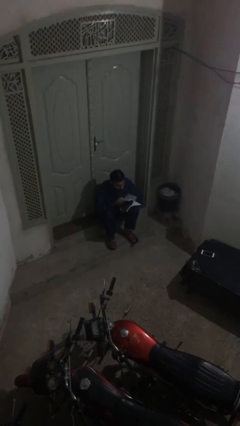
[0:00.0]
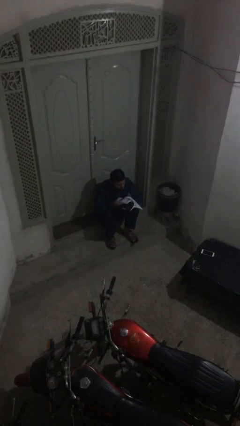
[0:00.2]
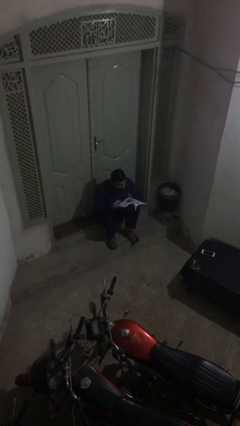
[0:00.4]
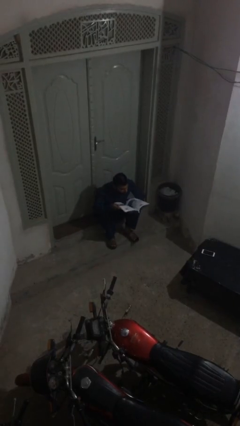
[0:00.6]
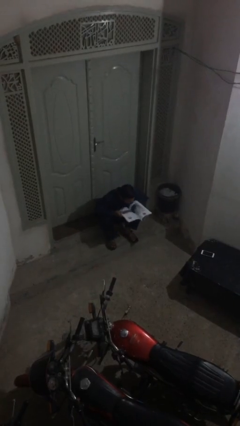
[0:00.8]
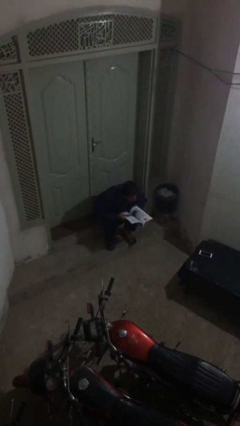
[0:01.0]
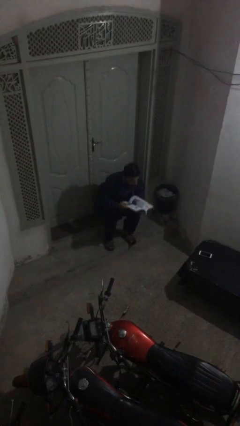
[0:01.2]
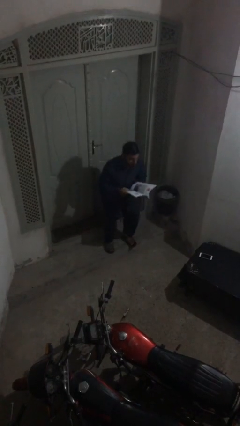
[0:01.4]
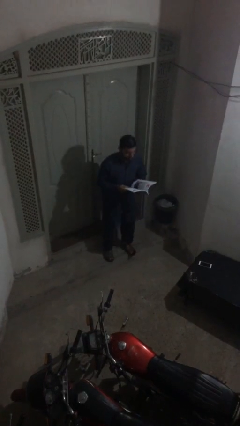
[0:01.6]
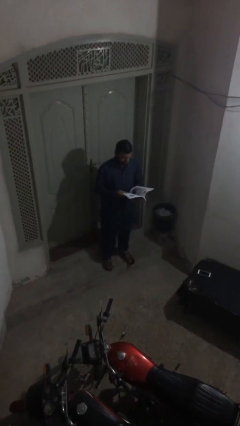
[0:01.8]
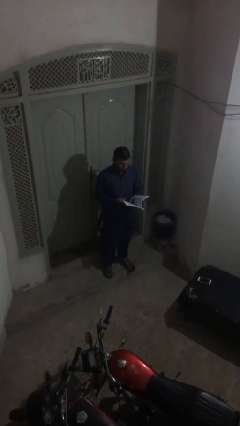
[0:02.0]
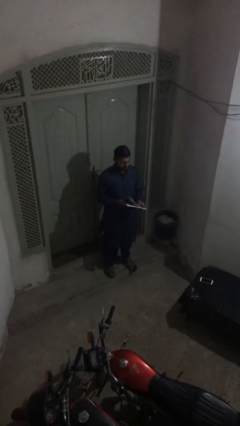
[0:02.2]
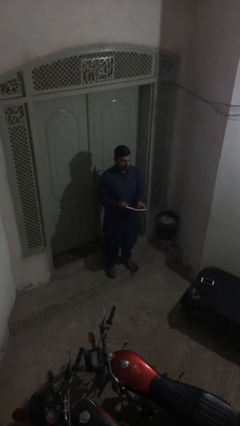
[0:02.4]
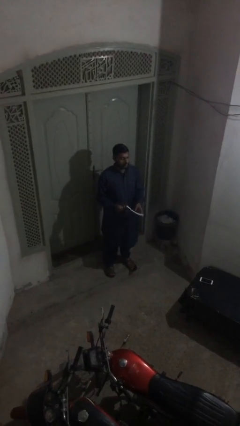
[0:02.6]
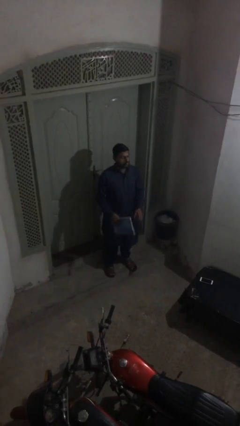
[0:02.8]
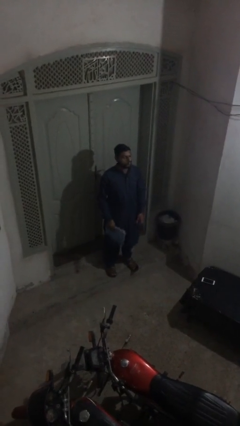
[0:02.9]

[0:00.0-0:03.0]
person stands up

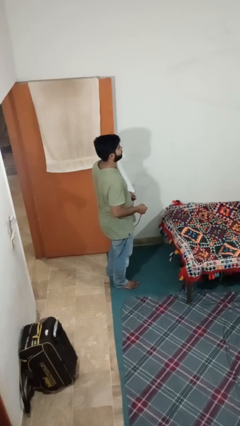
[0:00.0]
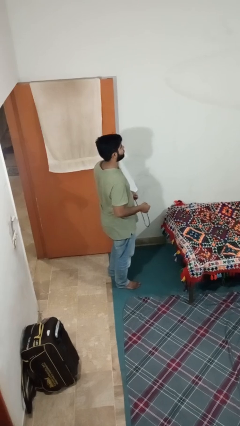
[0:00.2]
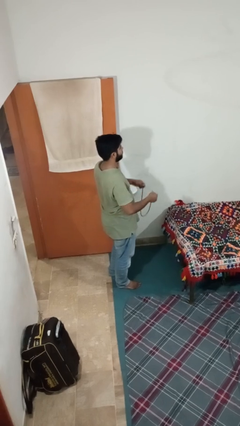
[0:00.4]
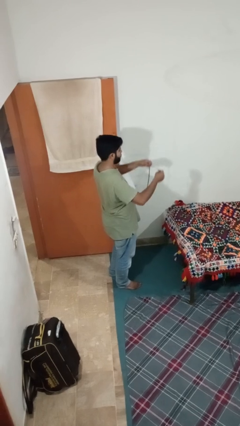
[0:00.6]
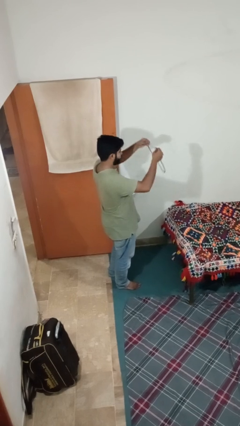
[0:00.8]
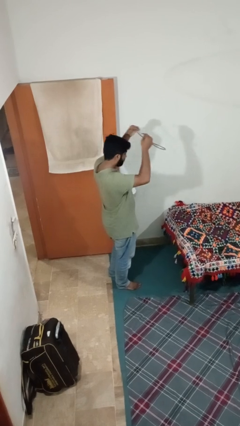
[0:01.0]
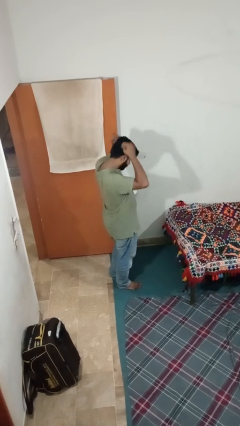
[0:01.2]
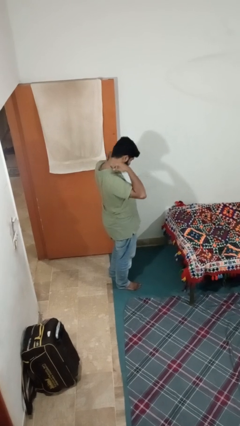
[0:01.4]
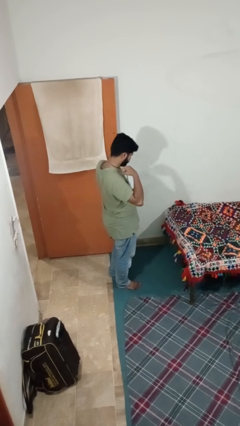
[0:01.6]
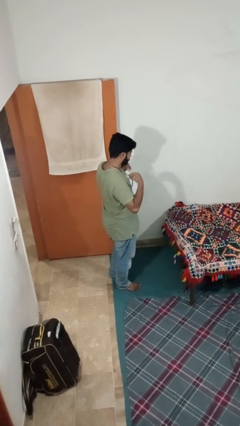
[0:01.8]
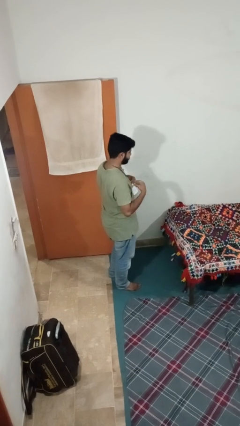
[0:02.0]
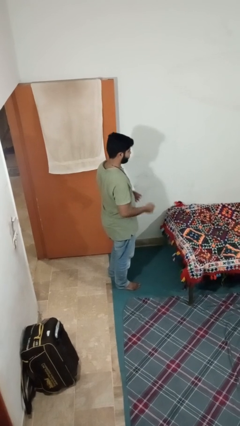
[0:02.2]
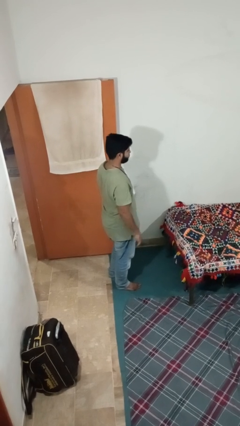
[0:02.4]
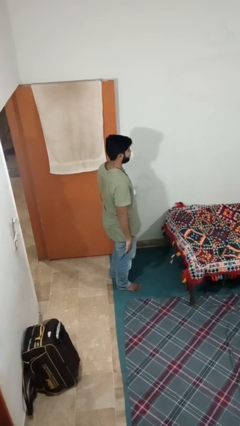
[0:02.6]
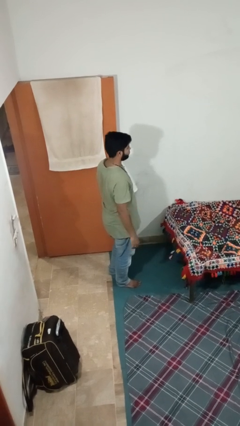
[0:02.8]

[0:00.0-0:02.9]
person puts on necklace

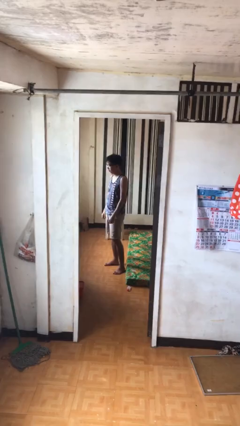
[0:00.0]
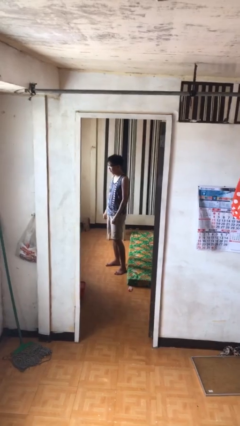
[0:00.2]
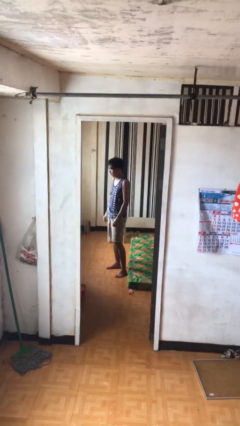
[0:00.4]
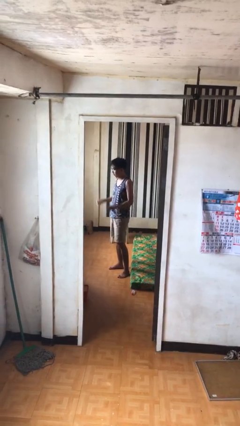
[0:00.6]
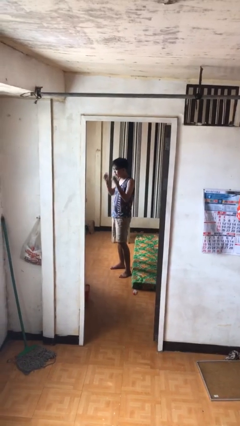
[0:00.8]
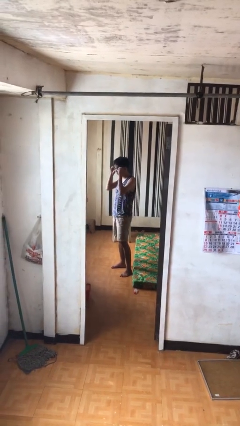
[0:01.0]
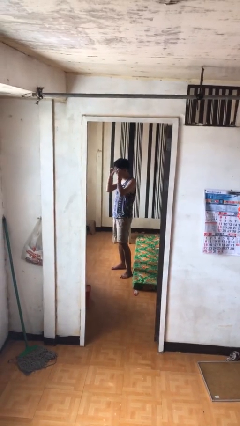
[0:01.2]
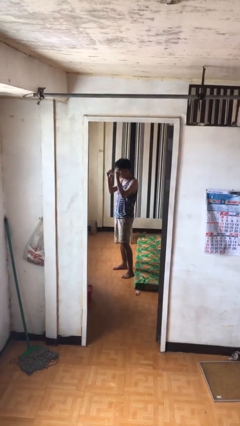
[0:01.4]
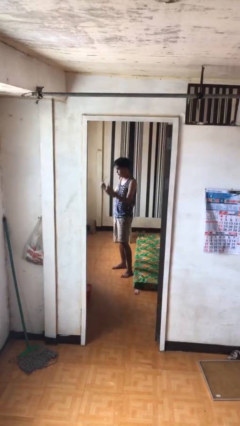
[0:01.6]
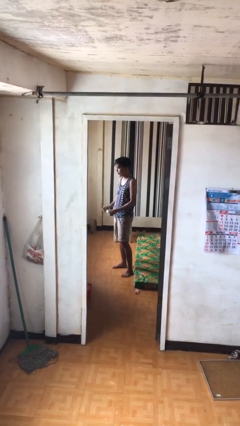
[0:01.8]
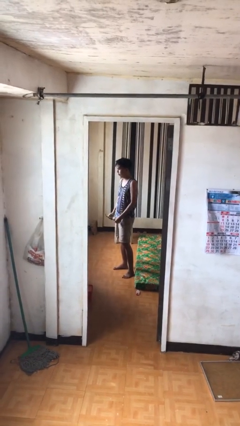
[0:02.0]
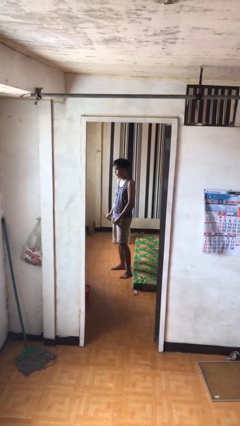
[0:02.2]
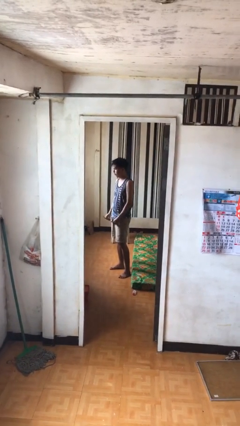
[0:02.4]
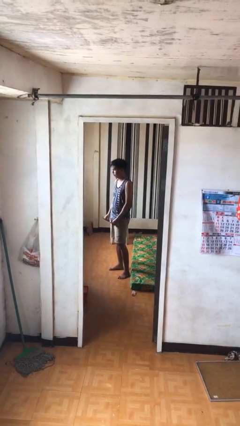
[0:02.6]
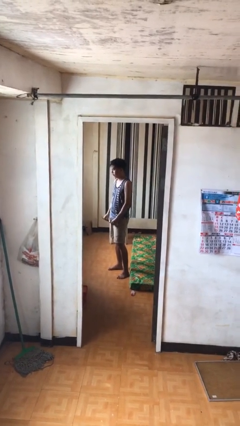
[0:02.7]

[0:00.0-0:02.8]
person takes off glasses

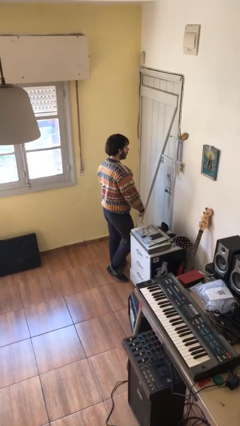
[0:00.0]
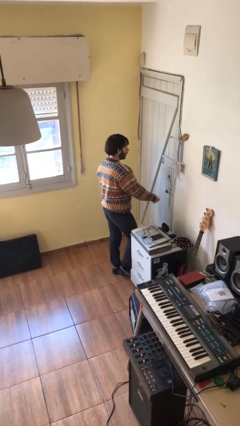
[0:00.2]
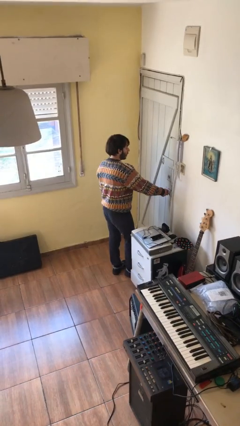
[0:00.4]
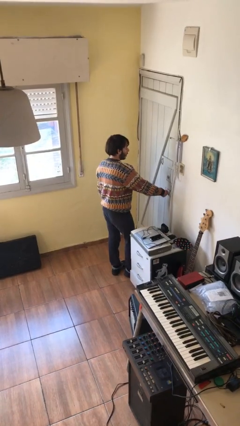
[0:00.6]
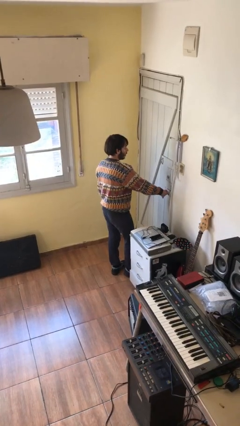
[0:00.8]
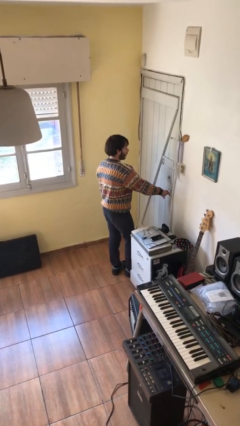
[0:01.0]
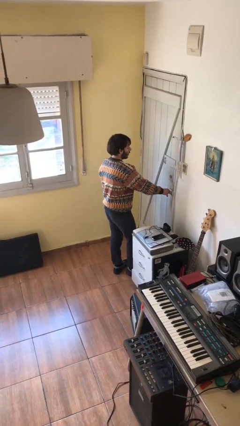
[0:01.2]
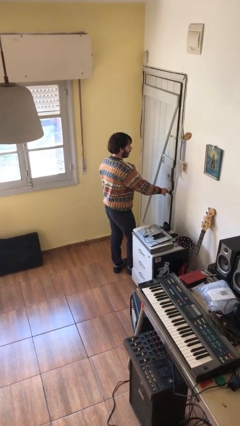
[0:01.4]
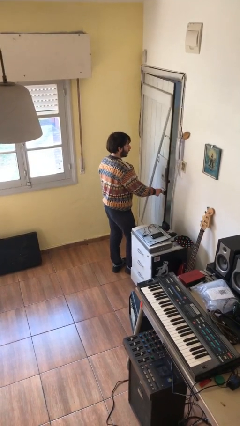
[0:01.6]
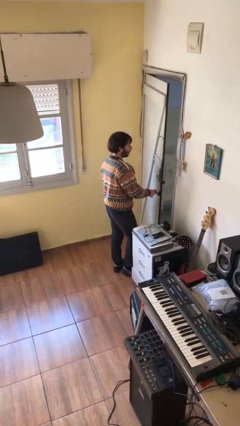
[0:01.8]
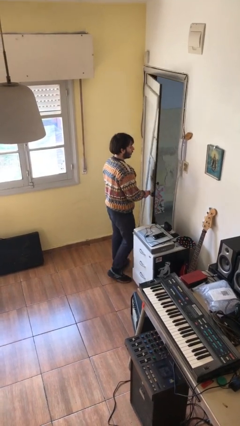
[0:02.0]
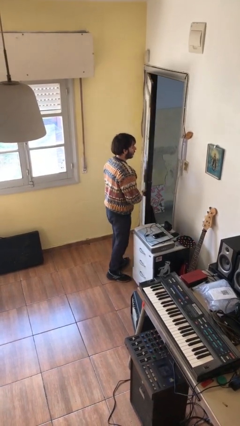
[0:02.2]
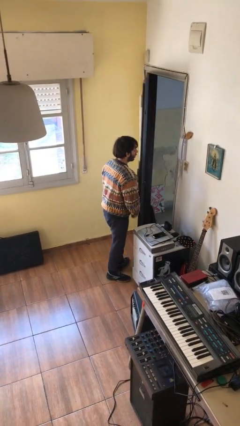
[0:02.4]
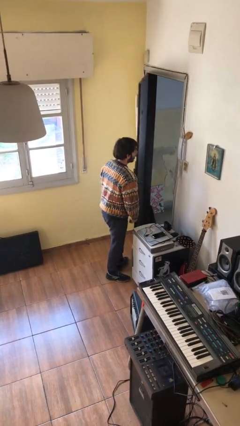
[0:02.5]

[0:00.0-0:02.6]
person opens facility door

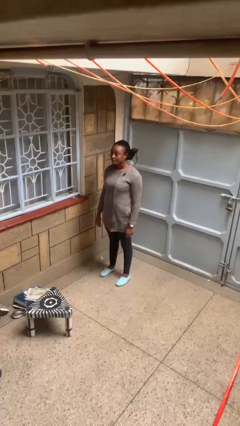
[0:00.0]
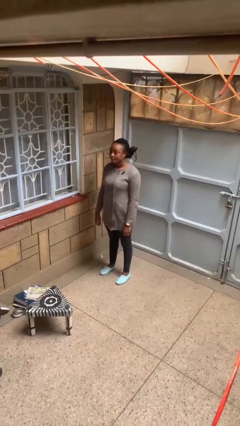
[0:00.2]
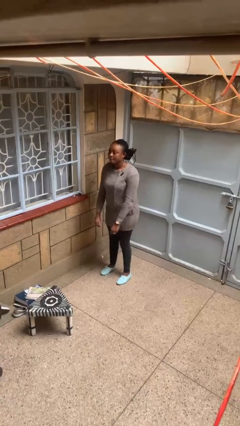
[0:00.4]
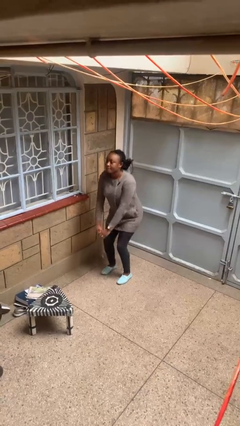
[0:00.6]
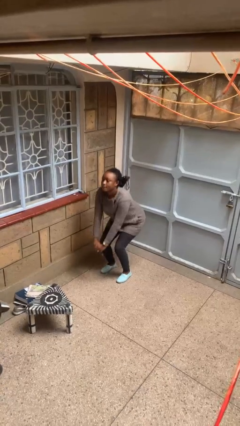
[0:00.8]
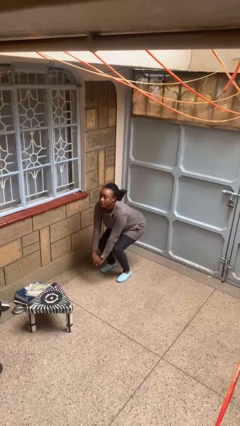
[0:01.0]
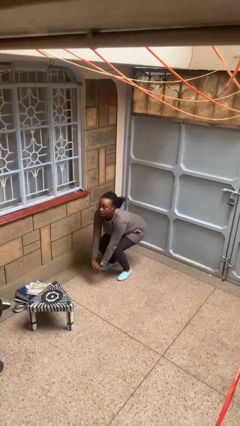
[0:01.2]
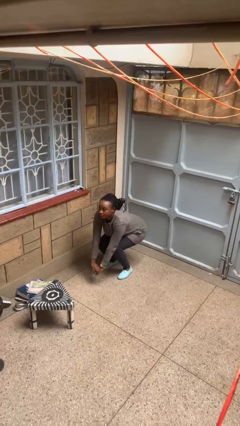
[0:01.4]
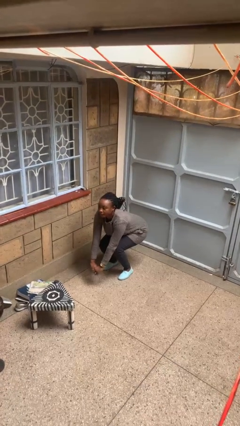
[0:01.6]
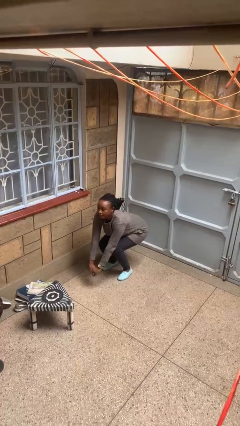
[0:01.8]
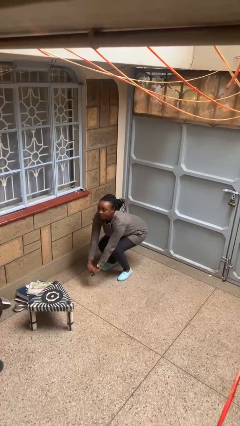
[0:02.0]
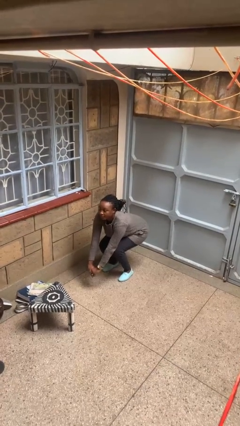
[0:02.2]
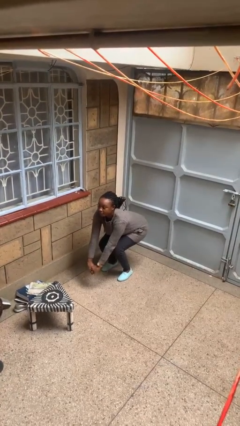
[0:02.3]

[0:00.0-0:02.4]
person squats

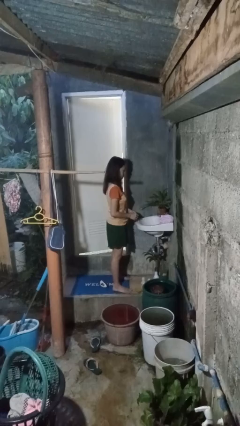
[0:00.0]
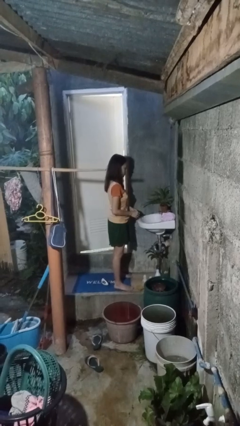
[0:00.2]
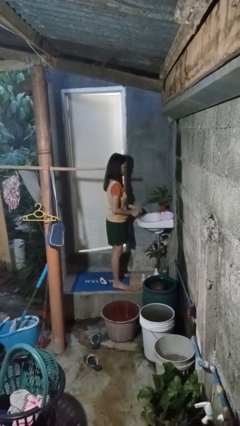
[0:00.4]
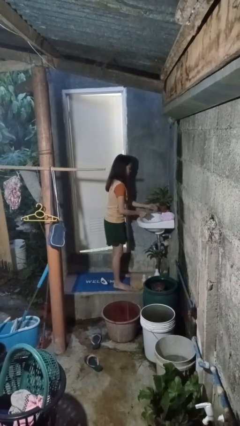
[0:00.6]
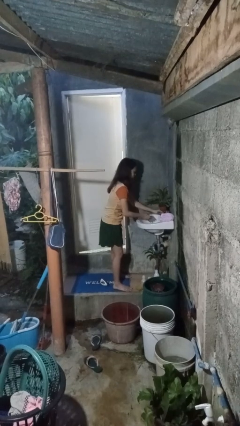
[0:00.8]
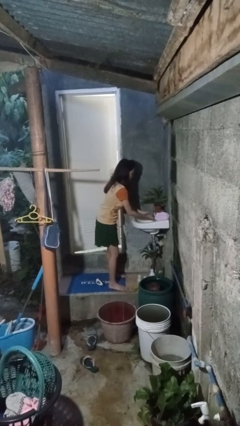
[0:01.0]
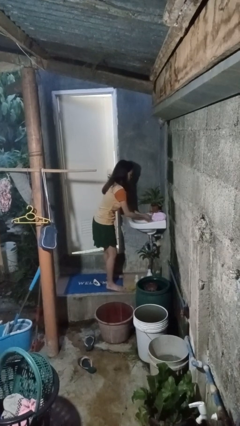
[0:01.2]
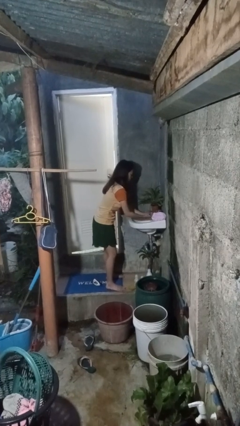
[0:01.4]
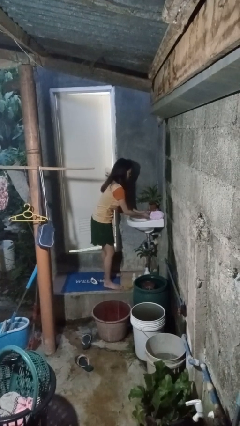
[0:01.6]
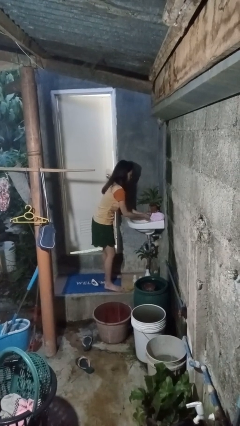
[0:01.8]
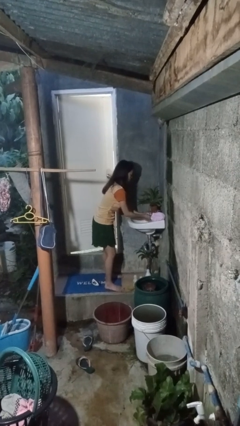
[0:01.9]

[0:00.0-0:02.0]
person washes hands

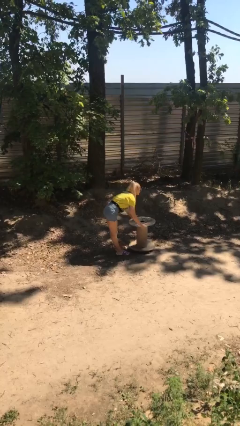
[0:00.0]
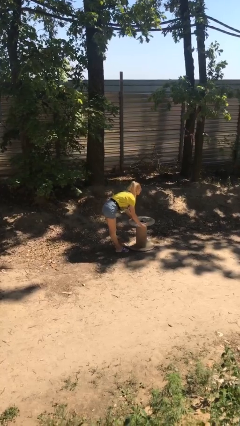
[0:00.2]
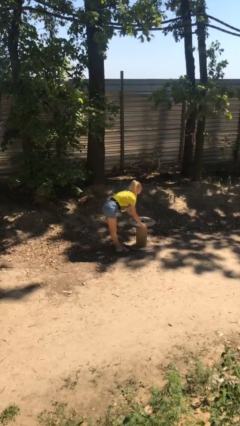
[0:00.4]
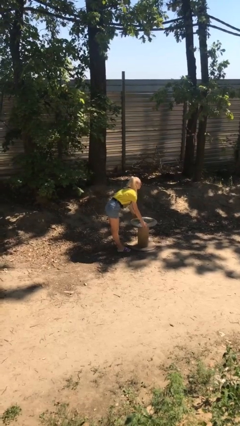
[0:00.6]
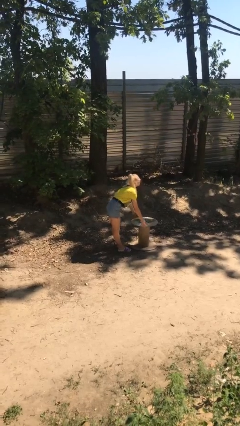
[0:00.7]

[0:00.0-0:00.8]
person puts down object on floor

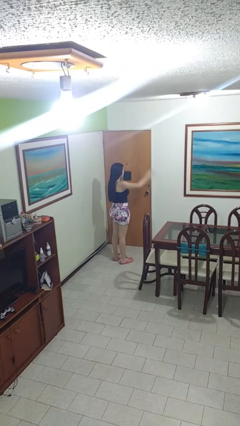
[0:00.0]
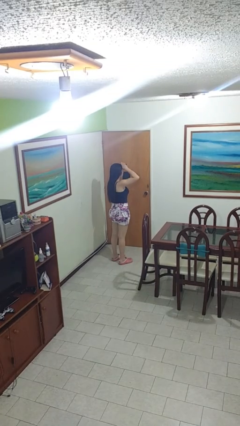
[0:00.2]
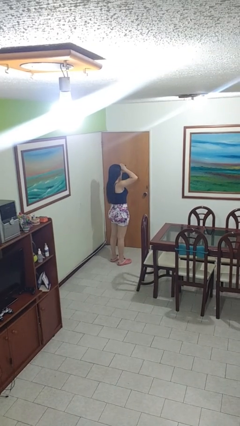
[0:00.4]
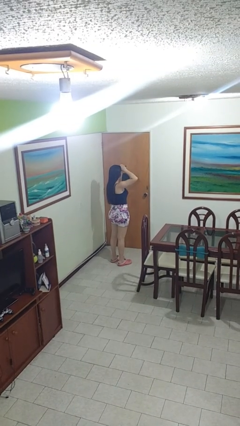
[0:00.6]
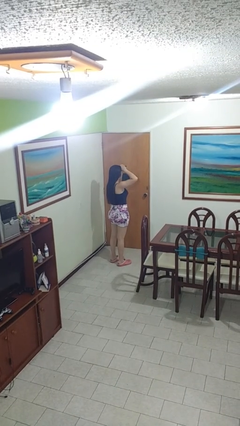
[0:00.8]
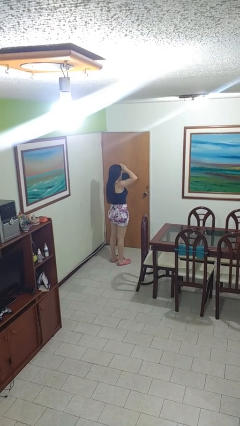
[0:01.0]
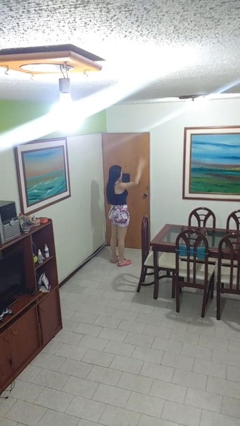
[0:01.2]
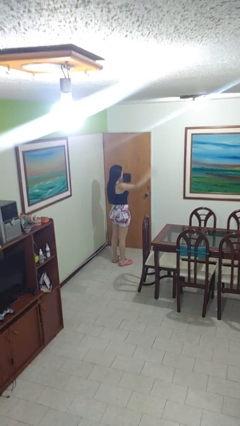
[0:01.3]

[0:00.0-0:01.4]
person salutes
